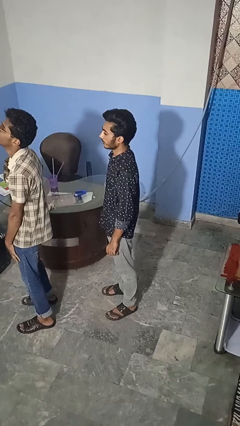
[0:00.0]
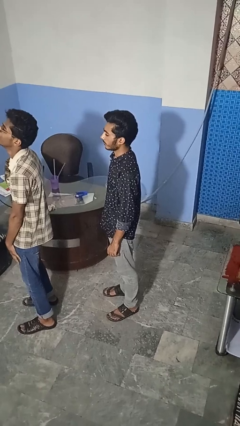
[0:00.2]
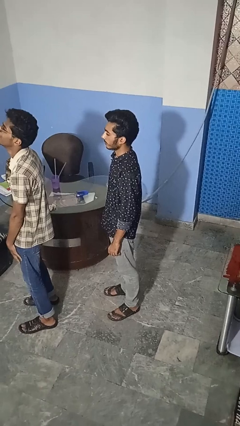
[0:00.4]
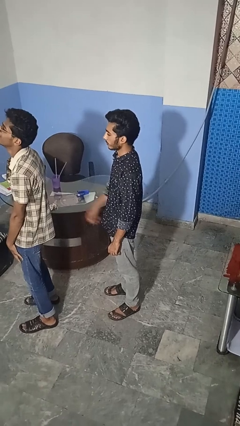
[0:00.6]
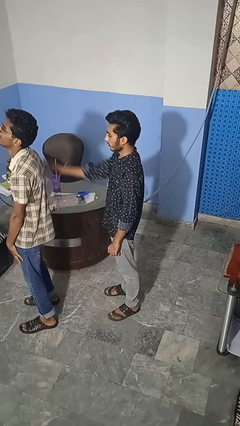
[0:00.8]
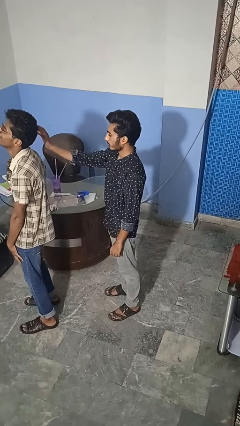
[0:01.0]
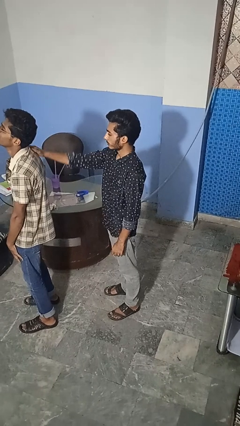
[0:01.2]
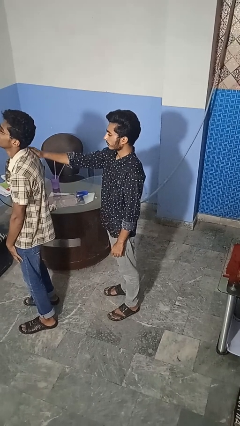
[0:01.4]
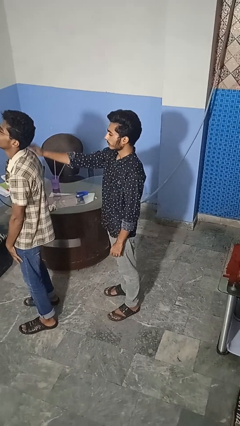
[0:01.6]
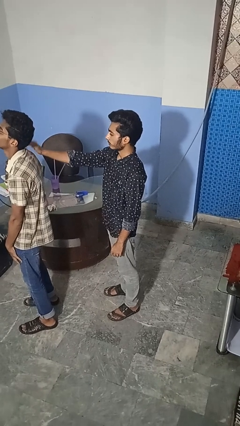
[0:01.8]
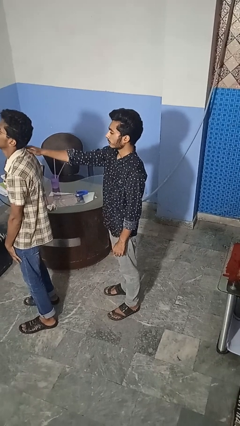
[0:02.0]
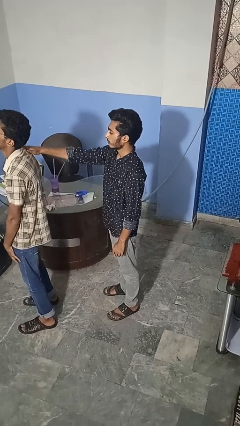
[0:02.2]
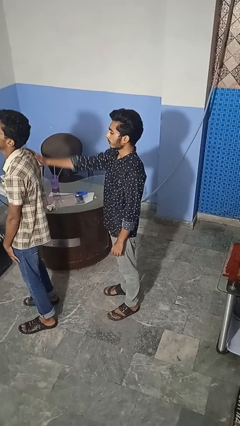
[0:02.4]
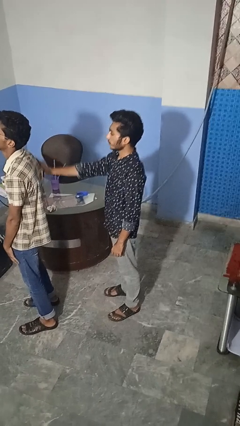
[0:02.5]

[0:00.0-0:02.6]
person touches back of person

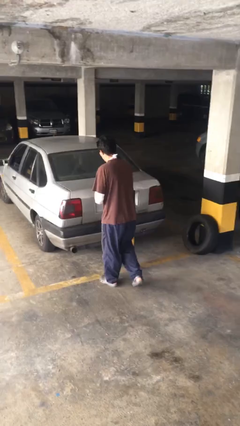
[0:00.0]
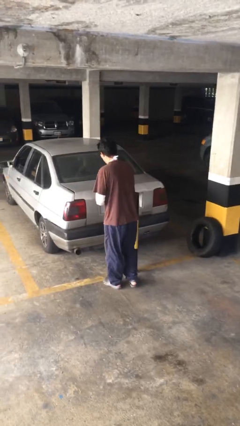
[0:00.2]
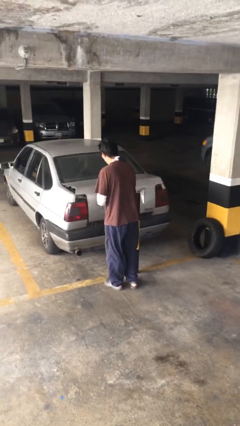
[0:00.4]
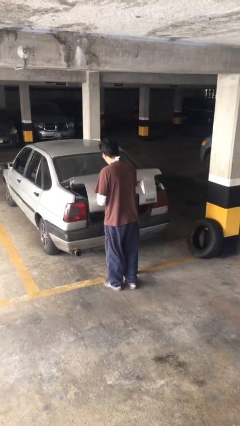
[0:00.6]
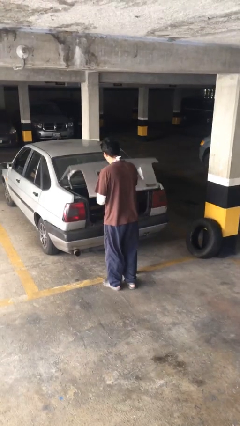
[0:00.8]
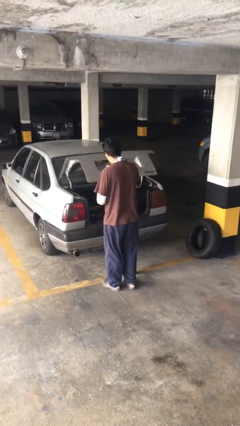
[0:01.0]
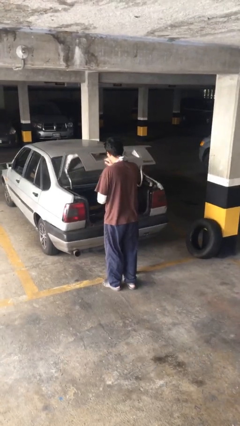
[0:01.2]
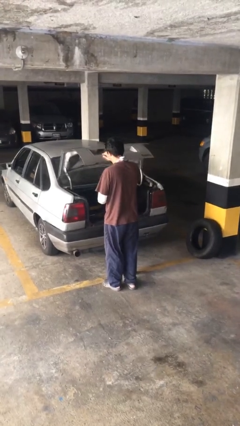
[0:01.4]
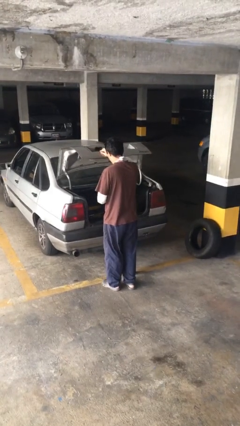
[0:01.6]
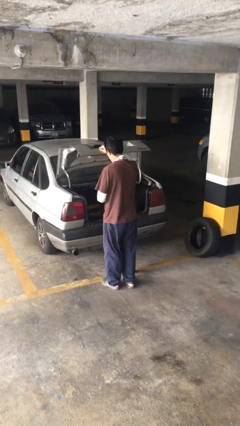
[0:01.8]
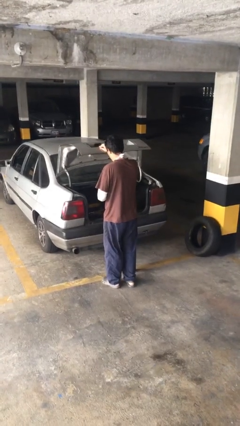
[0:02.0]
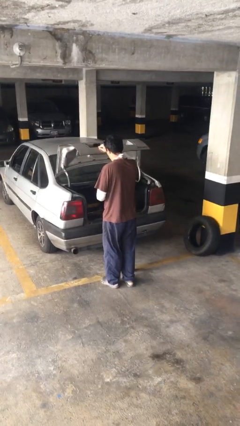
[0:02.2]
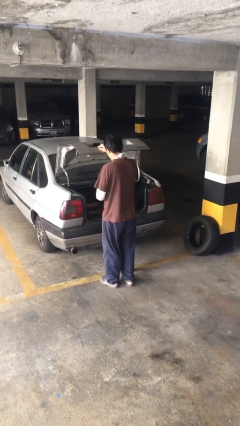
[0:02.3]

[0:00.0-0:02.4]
person opens car trunk

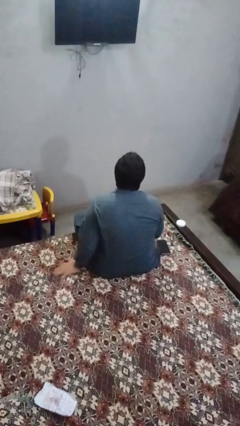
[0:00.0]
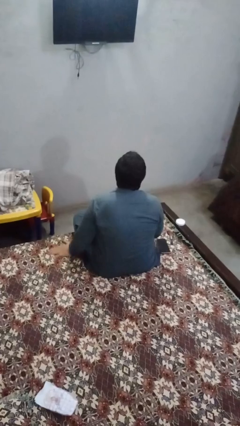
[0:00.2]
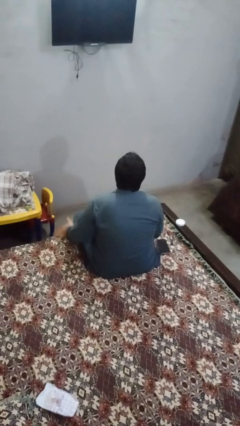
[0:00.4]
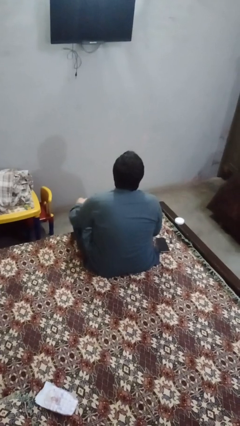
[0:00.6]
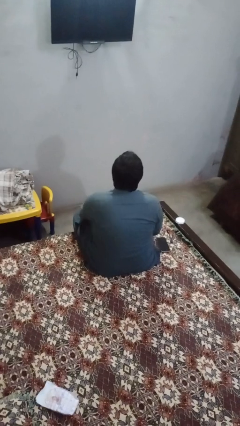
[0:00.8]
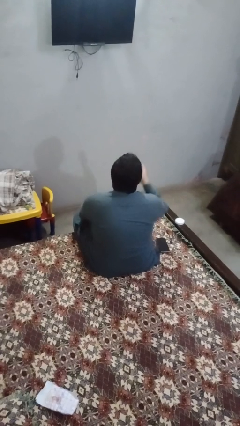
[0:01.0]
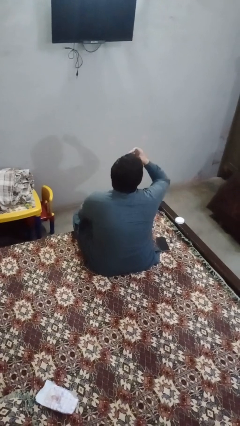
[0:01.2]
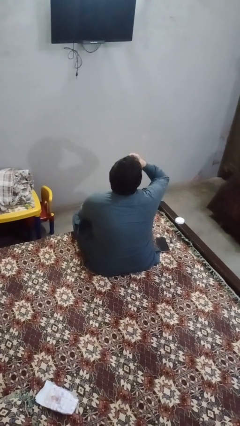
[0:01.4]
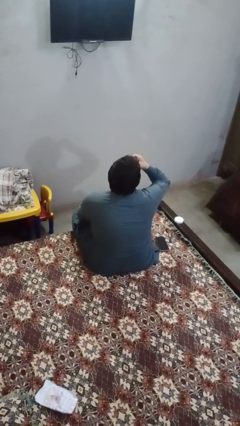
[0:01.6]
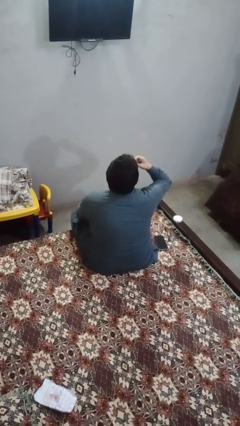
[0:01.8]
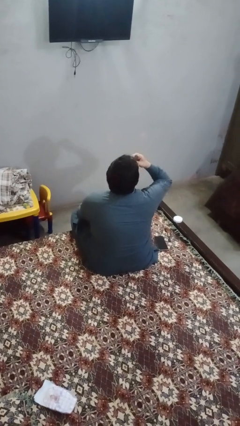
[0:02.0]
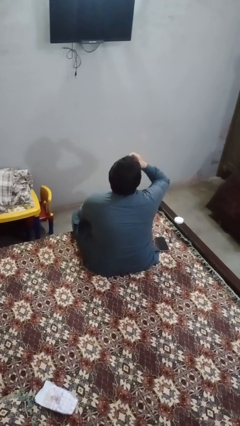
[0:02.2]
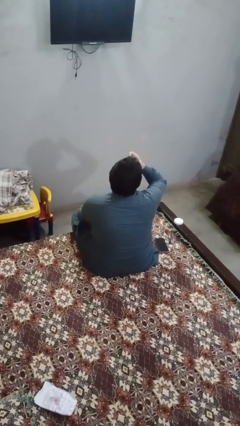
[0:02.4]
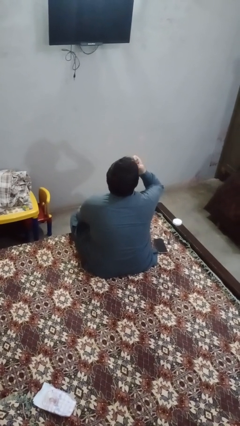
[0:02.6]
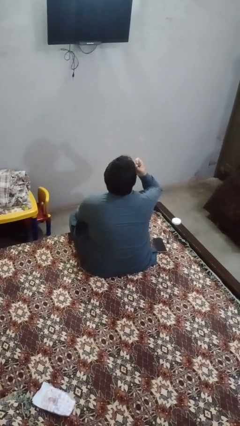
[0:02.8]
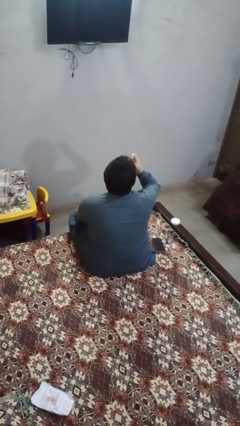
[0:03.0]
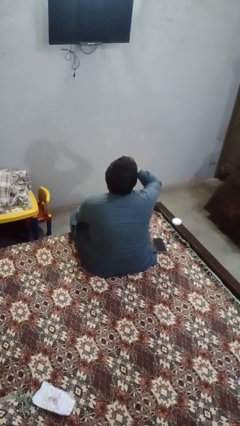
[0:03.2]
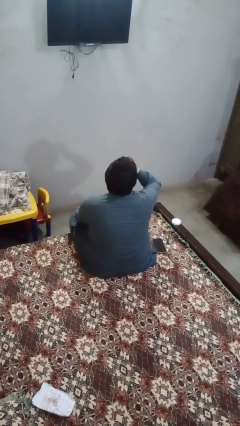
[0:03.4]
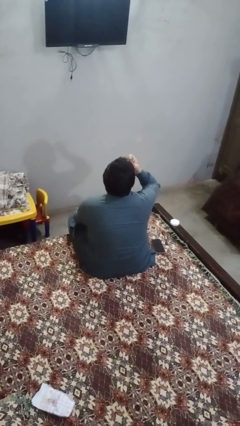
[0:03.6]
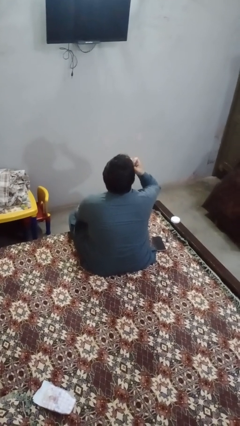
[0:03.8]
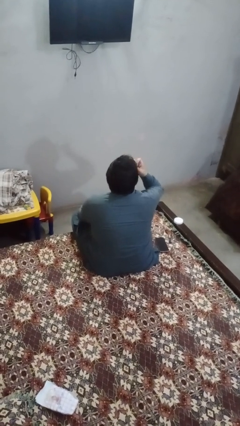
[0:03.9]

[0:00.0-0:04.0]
person applies lip makeup

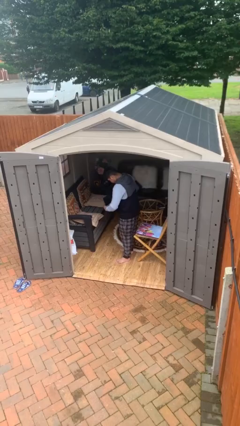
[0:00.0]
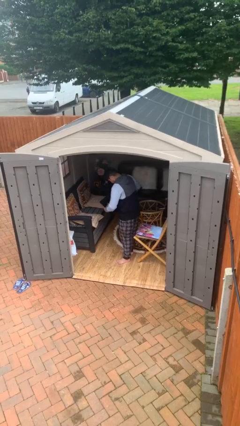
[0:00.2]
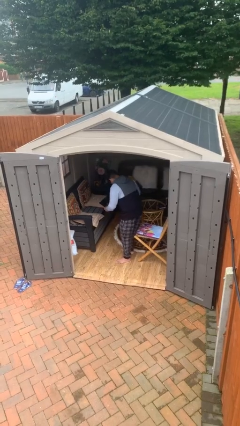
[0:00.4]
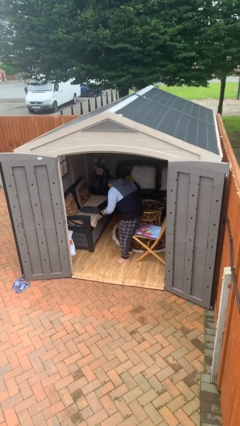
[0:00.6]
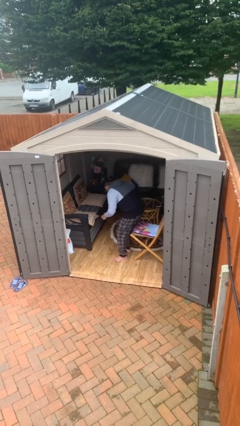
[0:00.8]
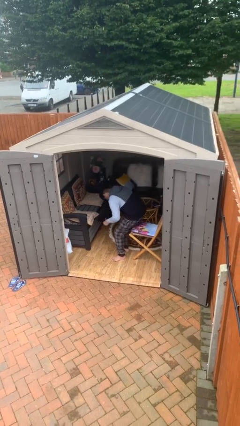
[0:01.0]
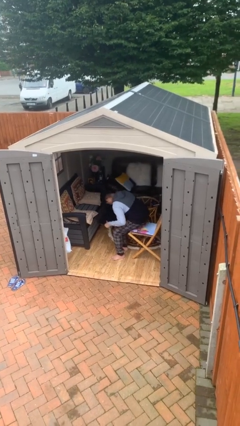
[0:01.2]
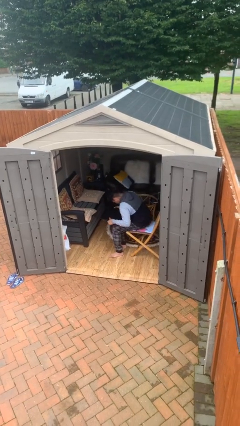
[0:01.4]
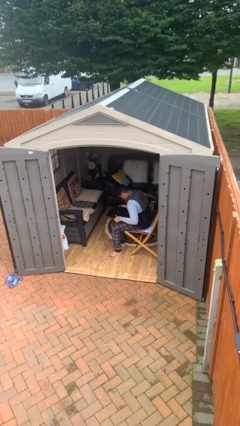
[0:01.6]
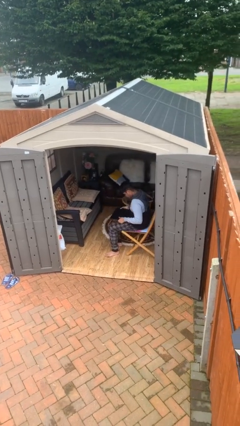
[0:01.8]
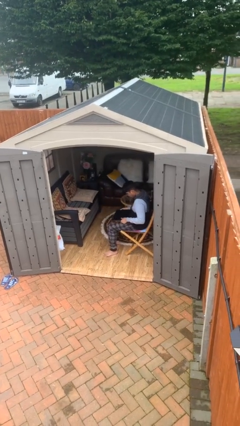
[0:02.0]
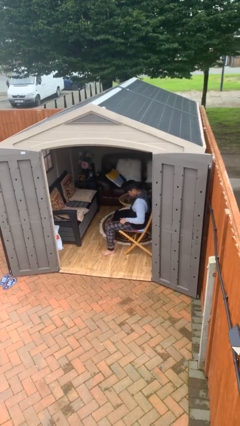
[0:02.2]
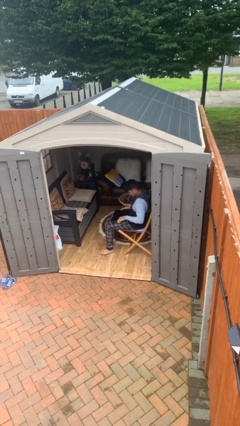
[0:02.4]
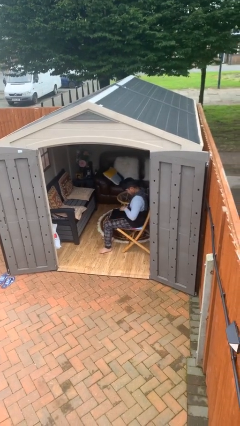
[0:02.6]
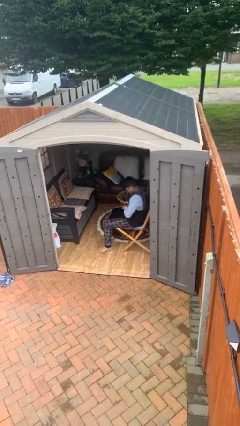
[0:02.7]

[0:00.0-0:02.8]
person sits down

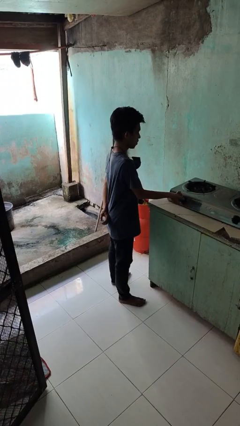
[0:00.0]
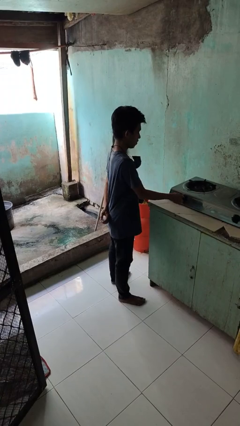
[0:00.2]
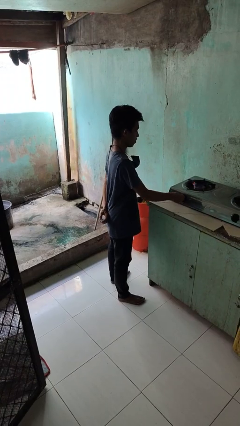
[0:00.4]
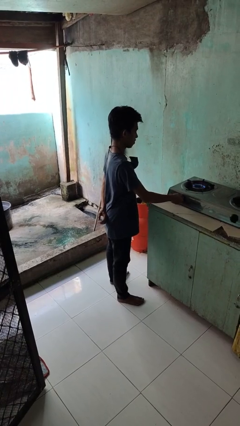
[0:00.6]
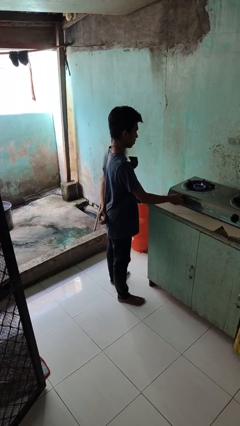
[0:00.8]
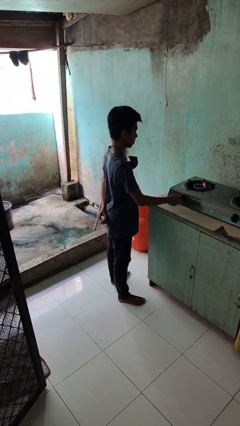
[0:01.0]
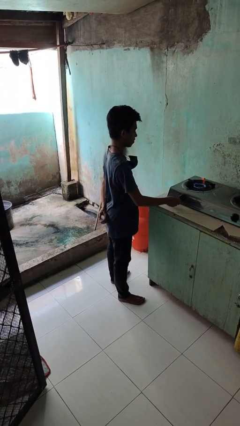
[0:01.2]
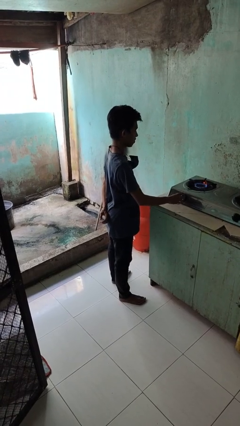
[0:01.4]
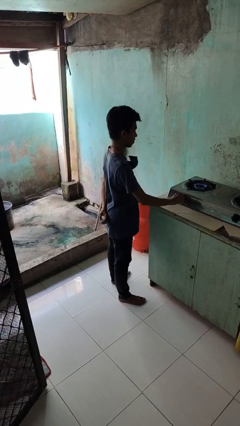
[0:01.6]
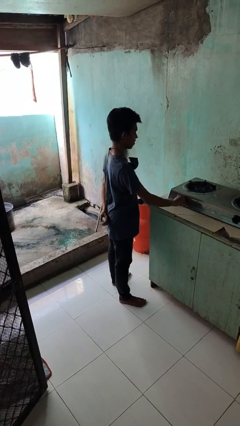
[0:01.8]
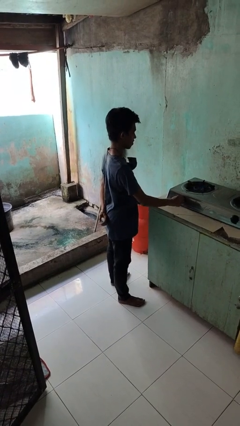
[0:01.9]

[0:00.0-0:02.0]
person turns on stovetop

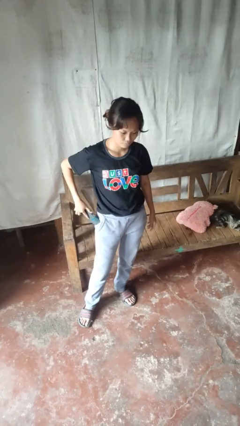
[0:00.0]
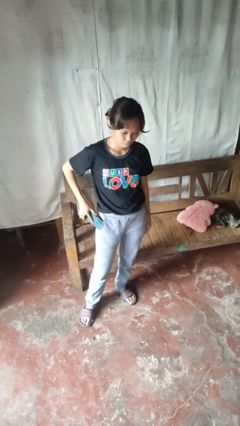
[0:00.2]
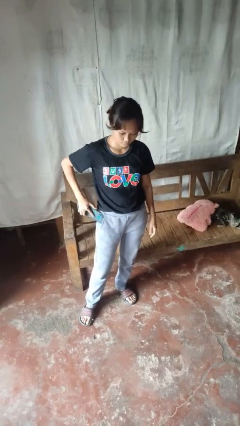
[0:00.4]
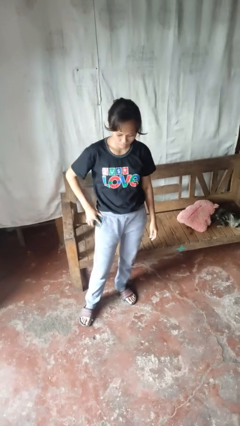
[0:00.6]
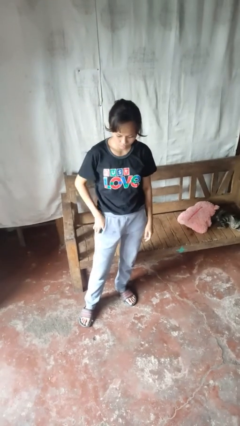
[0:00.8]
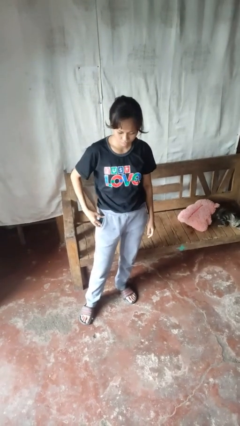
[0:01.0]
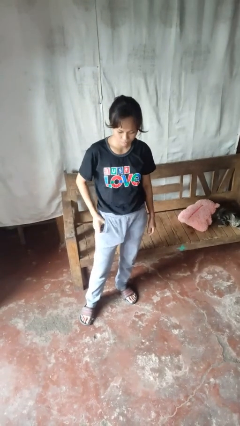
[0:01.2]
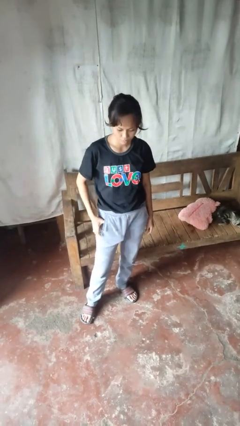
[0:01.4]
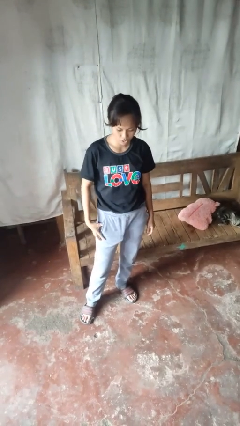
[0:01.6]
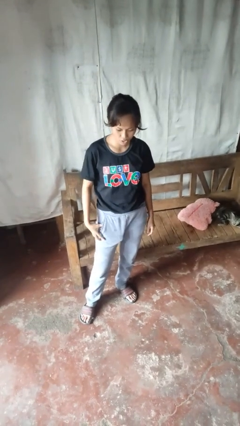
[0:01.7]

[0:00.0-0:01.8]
person puts phone into pocket

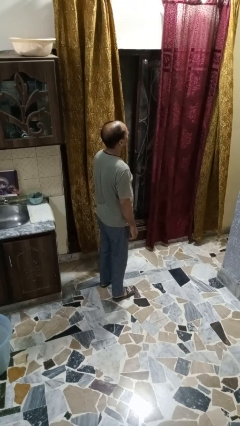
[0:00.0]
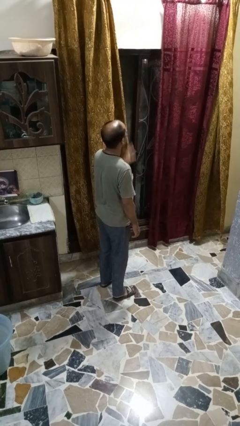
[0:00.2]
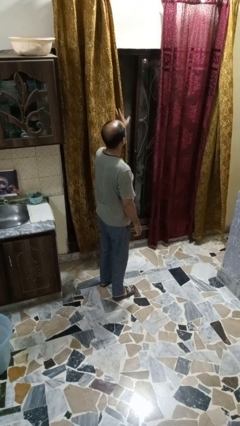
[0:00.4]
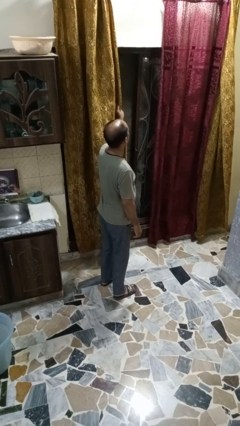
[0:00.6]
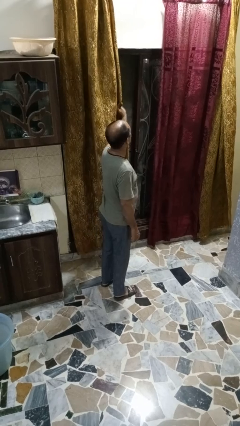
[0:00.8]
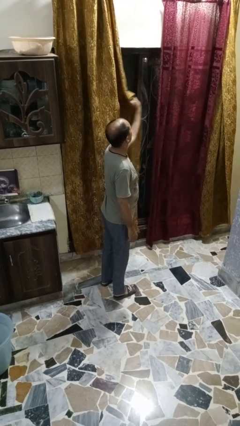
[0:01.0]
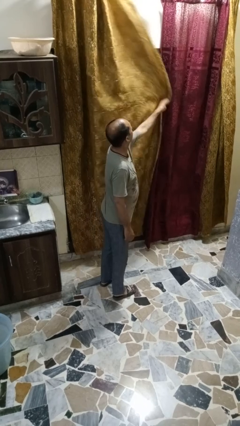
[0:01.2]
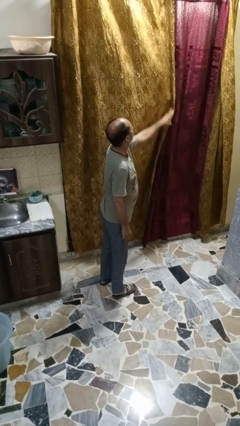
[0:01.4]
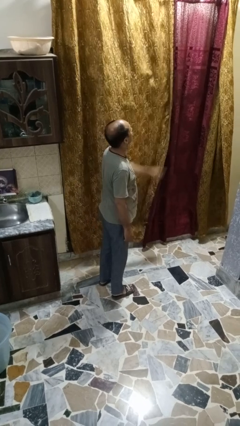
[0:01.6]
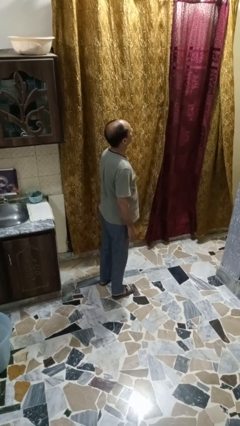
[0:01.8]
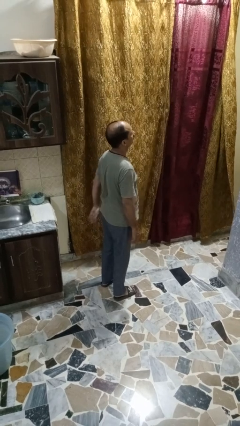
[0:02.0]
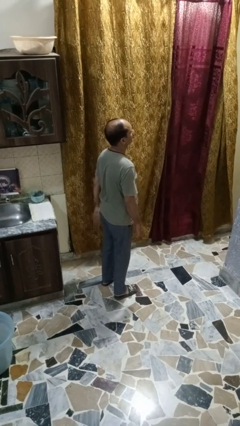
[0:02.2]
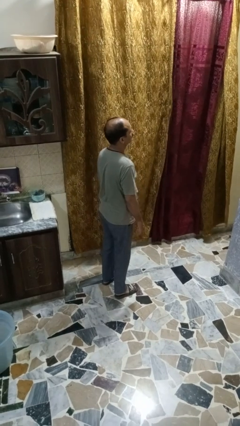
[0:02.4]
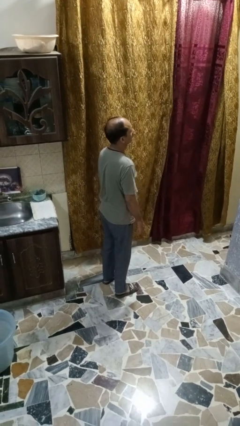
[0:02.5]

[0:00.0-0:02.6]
person closes curtains
